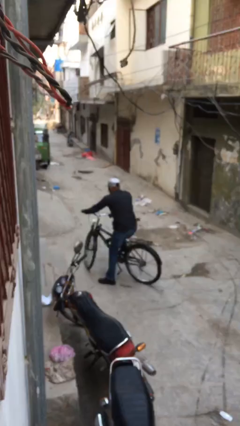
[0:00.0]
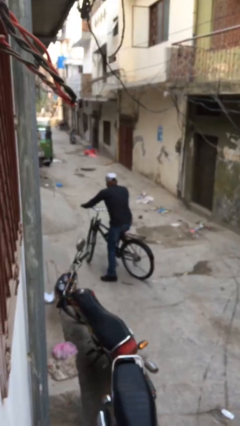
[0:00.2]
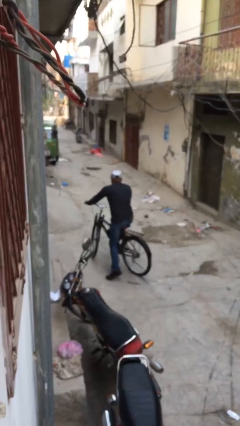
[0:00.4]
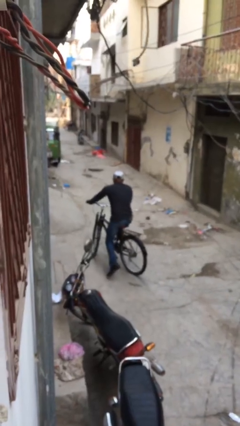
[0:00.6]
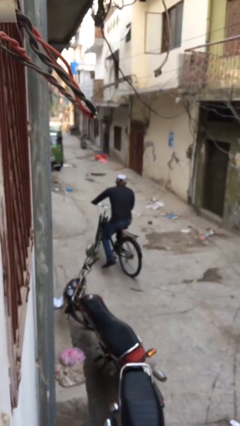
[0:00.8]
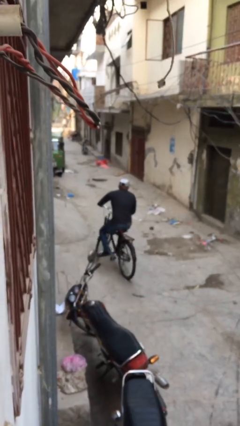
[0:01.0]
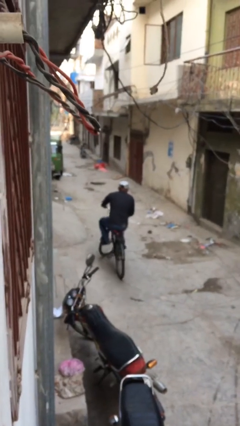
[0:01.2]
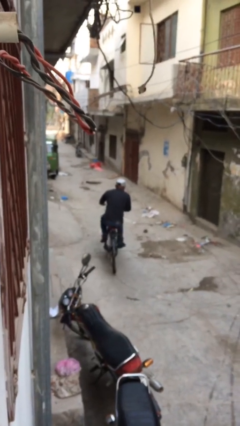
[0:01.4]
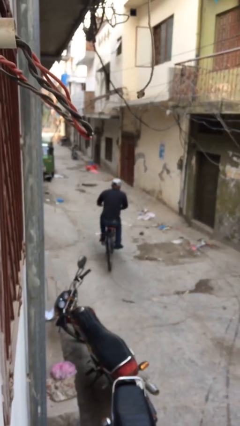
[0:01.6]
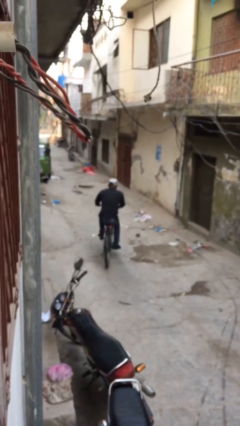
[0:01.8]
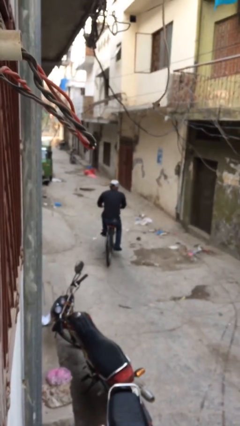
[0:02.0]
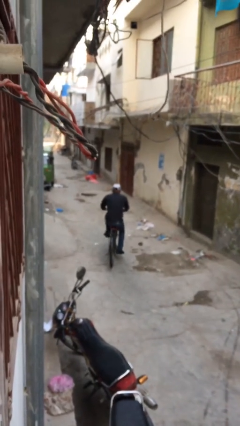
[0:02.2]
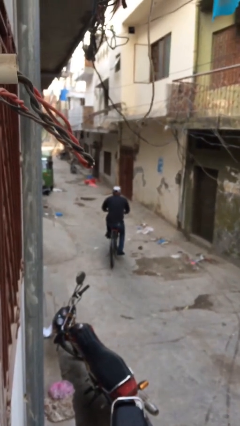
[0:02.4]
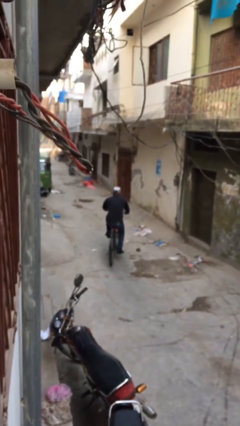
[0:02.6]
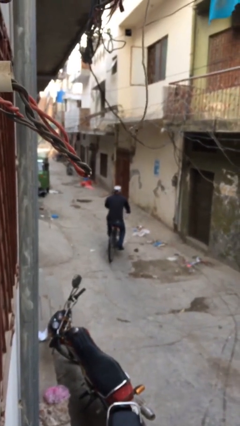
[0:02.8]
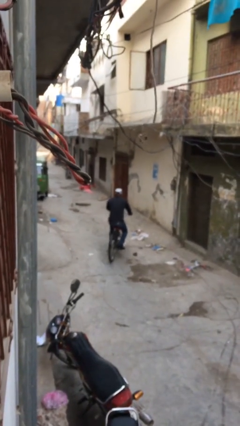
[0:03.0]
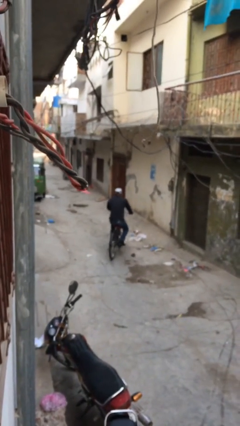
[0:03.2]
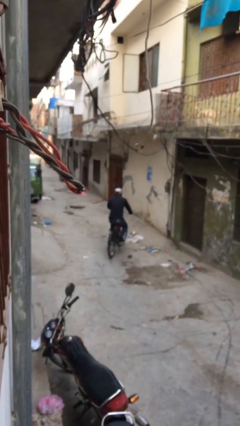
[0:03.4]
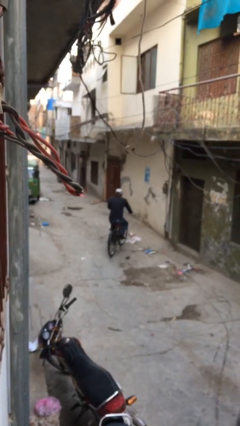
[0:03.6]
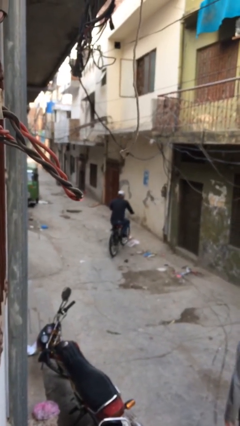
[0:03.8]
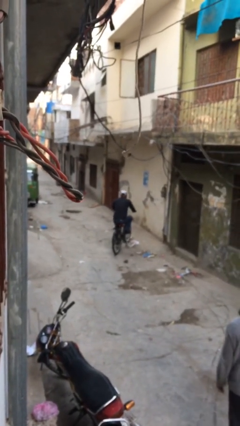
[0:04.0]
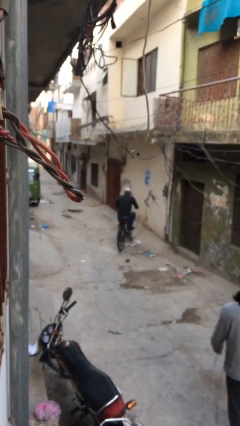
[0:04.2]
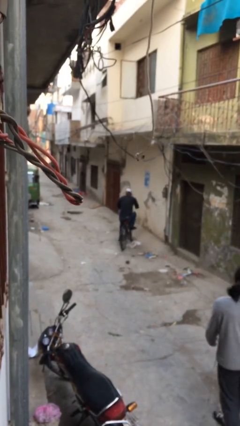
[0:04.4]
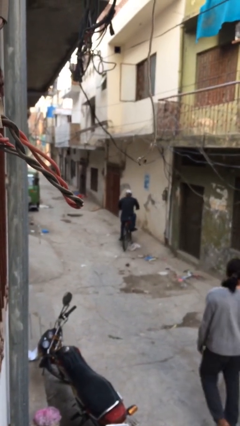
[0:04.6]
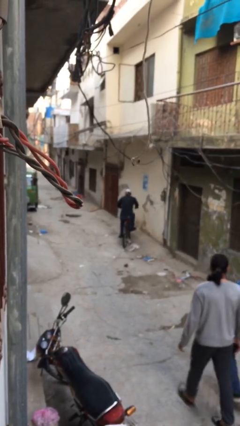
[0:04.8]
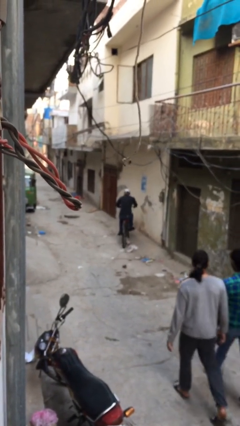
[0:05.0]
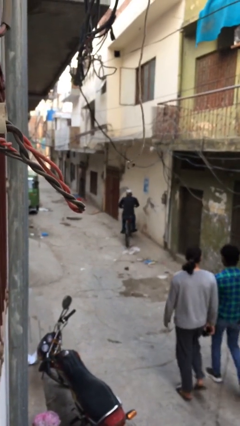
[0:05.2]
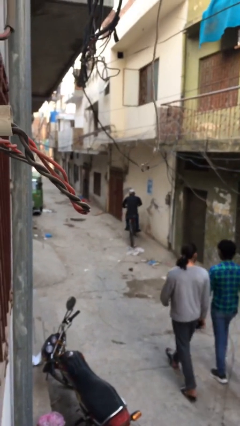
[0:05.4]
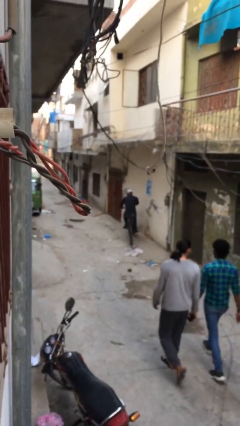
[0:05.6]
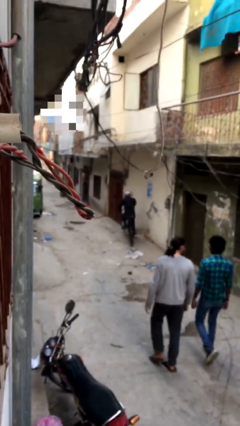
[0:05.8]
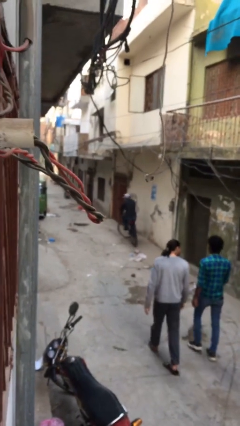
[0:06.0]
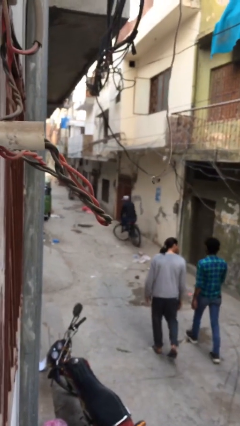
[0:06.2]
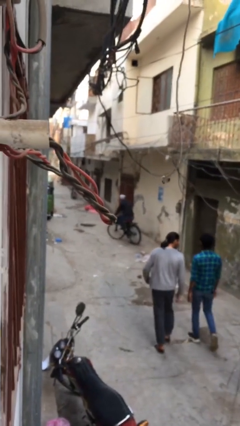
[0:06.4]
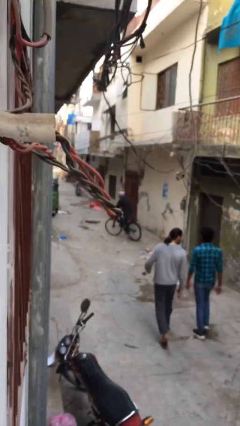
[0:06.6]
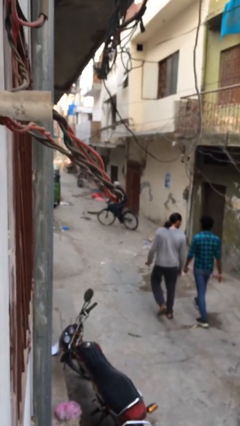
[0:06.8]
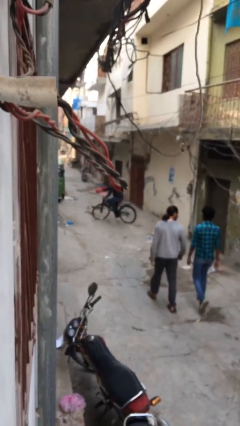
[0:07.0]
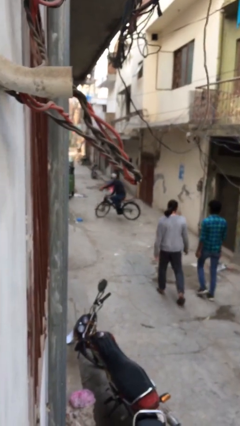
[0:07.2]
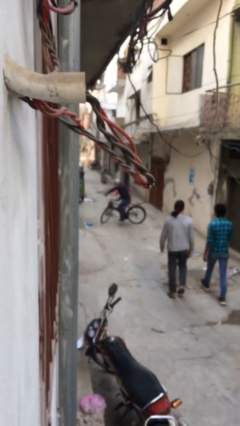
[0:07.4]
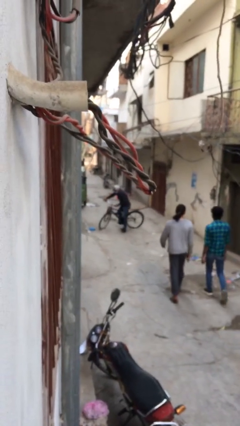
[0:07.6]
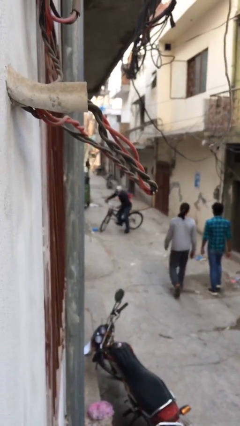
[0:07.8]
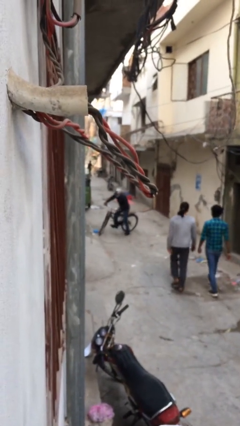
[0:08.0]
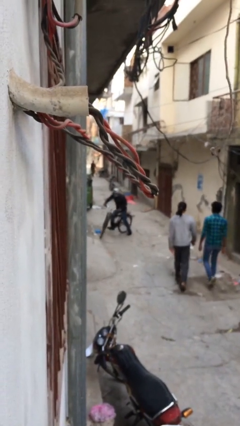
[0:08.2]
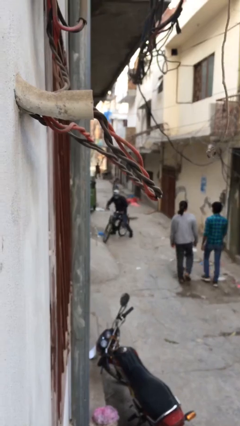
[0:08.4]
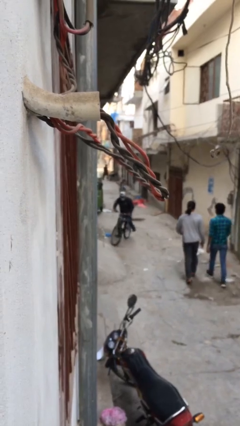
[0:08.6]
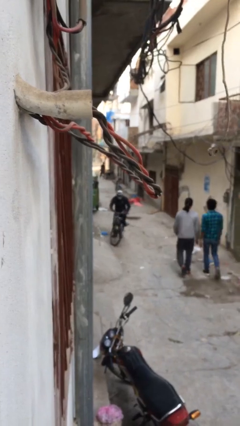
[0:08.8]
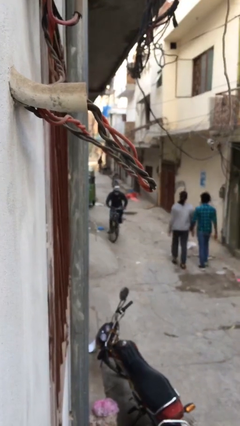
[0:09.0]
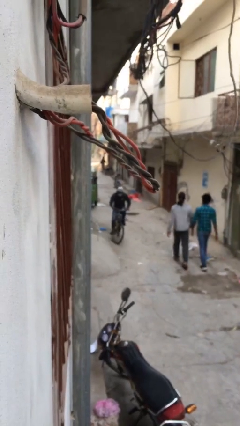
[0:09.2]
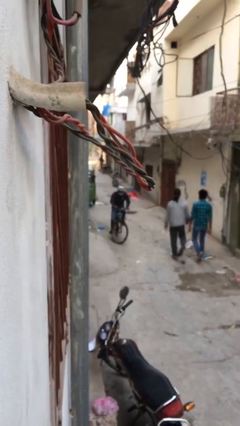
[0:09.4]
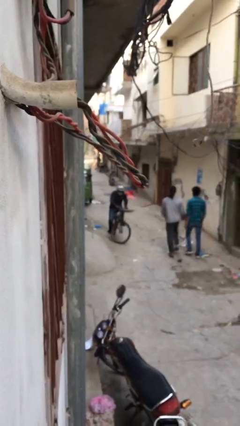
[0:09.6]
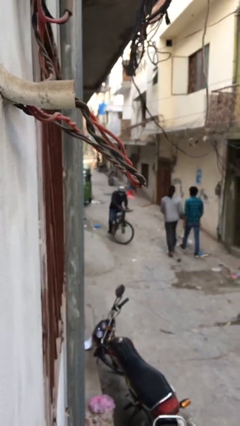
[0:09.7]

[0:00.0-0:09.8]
person rides bicycle

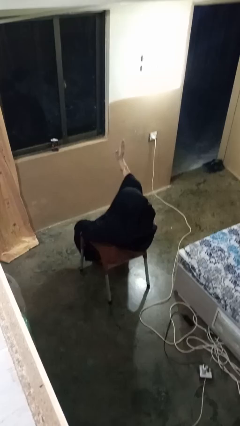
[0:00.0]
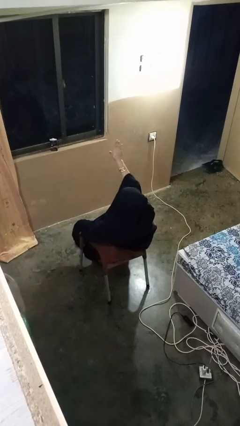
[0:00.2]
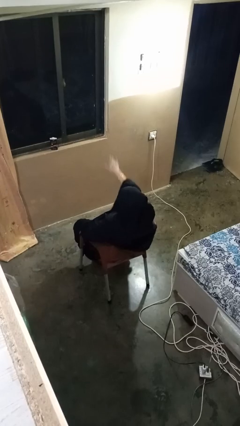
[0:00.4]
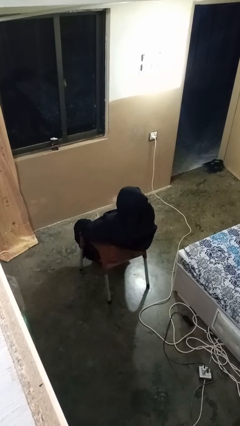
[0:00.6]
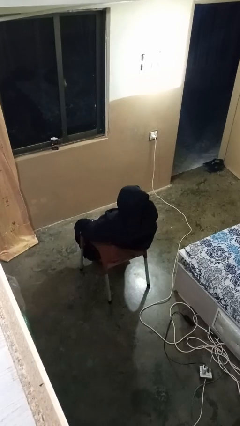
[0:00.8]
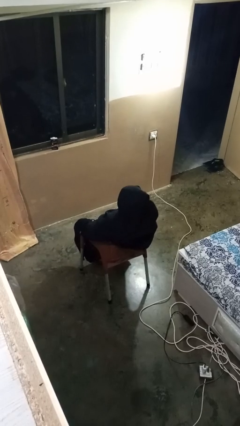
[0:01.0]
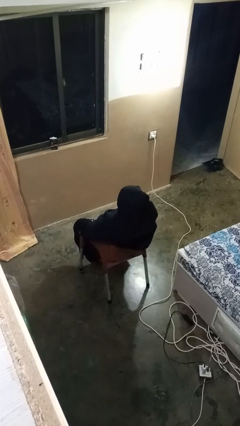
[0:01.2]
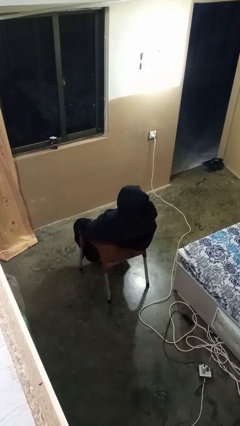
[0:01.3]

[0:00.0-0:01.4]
person gestures swipe down

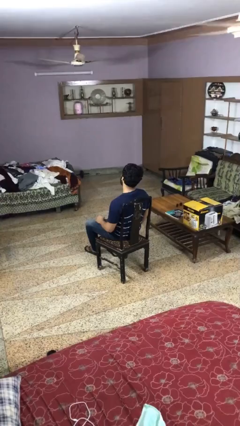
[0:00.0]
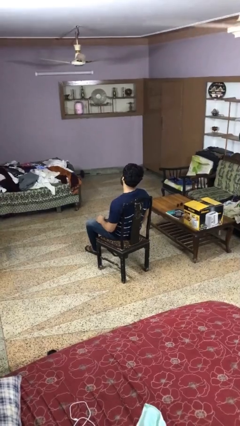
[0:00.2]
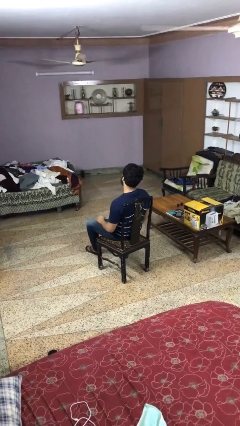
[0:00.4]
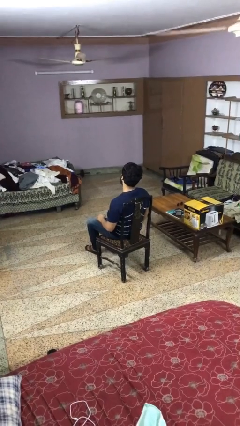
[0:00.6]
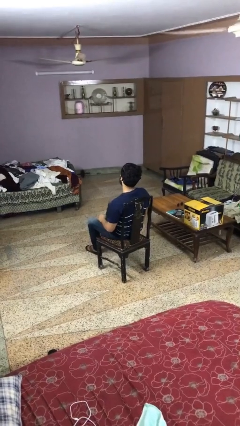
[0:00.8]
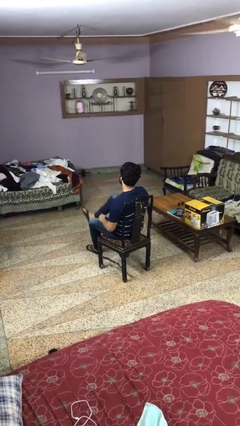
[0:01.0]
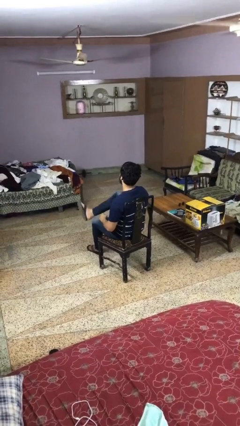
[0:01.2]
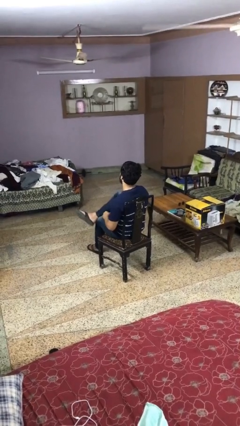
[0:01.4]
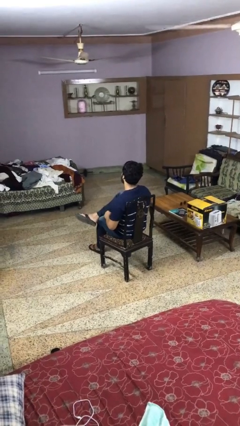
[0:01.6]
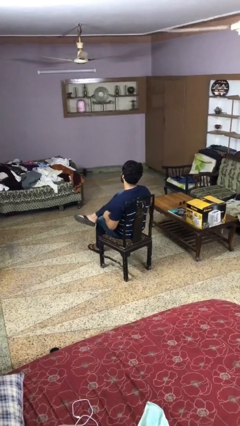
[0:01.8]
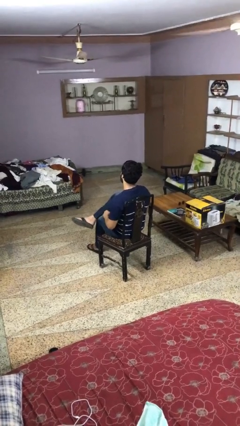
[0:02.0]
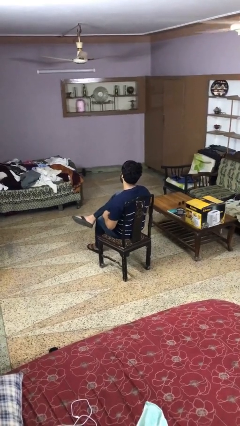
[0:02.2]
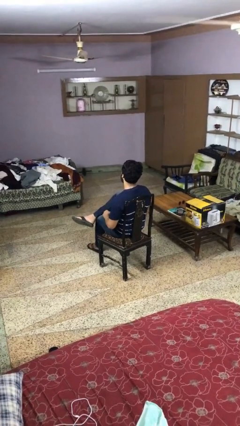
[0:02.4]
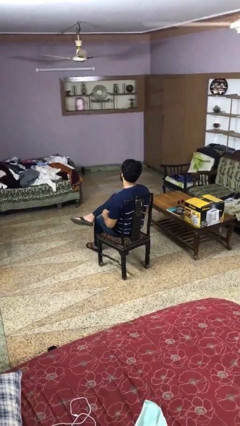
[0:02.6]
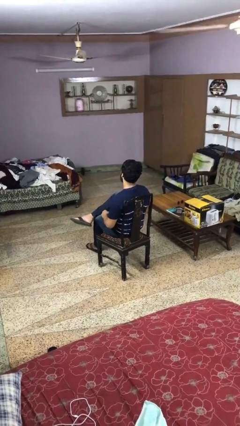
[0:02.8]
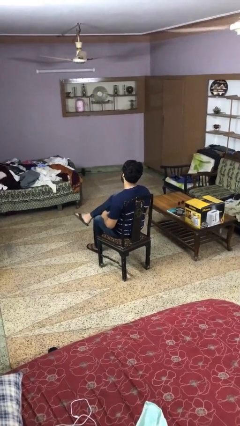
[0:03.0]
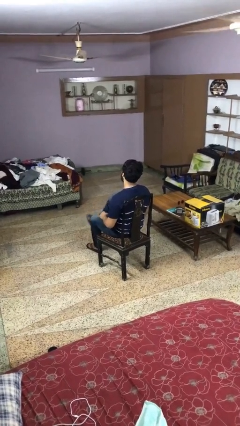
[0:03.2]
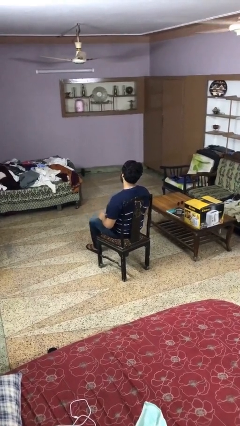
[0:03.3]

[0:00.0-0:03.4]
person crosses legs

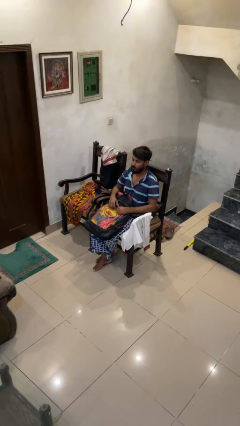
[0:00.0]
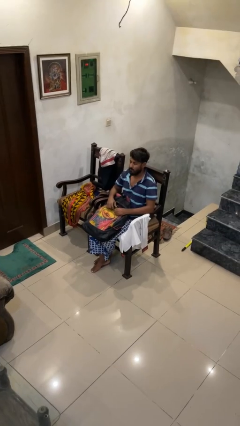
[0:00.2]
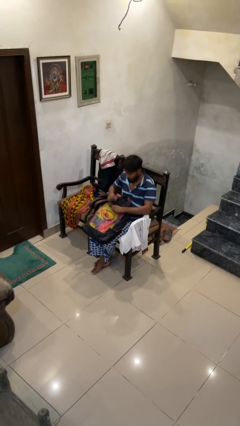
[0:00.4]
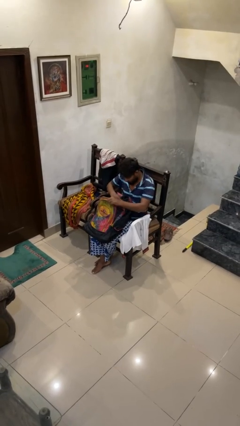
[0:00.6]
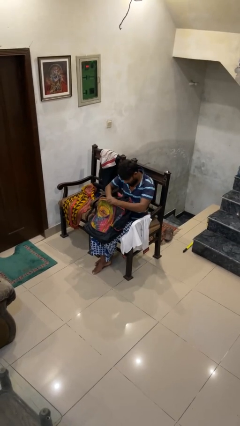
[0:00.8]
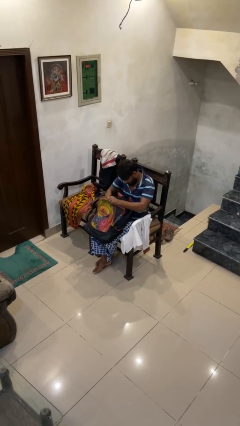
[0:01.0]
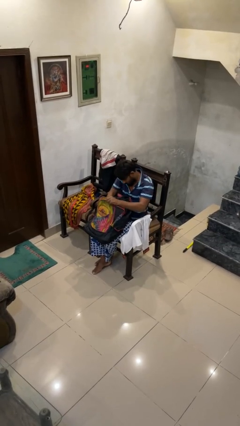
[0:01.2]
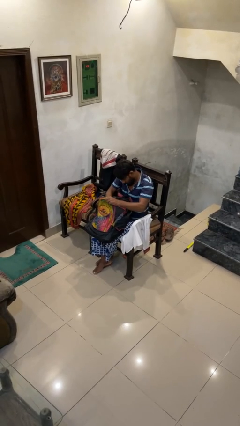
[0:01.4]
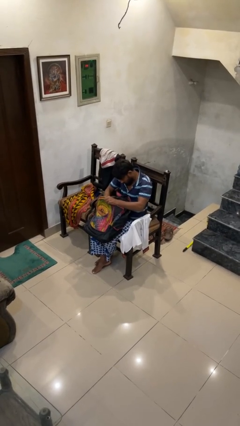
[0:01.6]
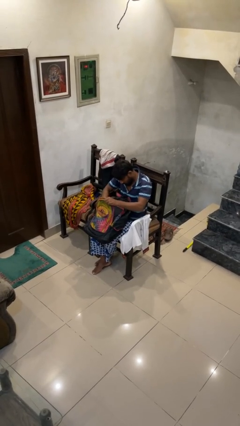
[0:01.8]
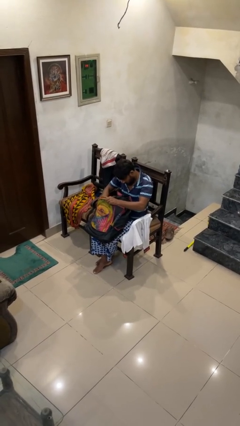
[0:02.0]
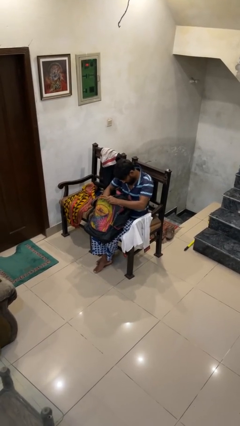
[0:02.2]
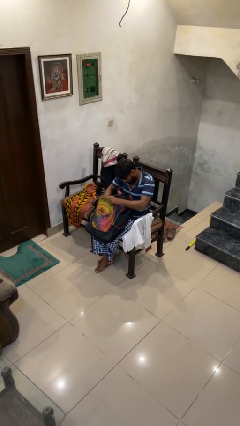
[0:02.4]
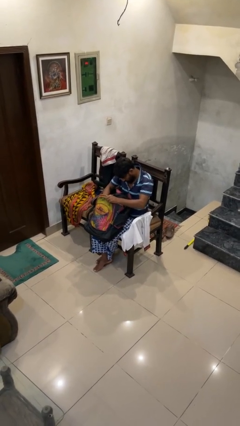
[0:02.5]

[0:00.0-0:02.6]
person searches in backpack

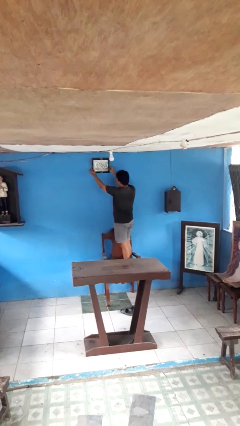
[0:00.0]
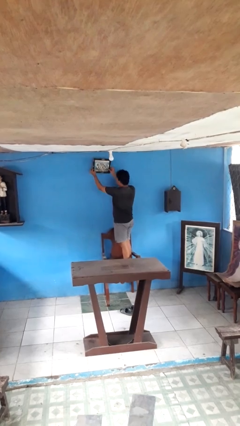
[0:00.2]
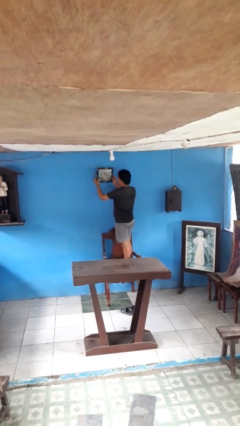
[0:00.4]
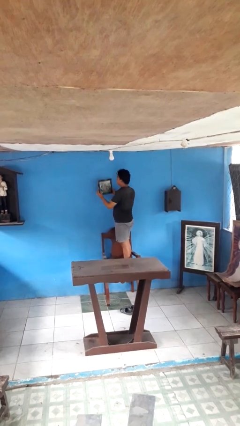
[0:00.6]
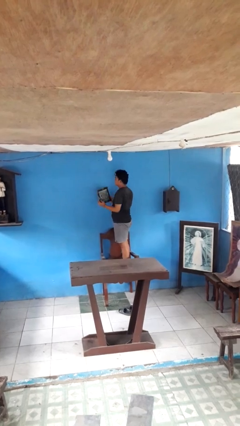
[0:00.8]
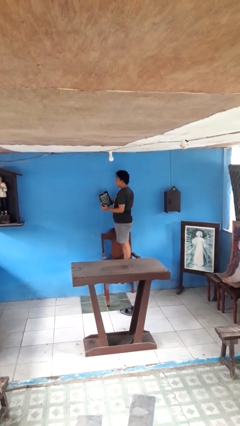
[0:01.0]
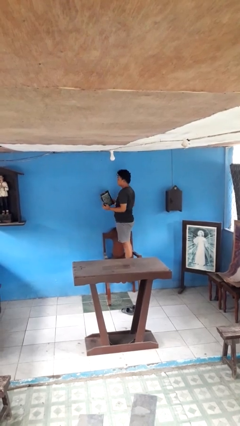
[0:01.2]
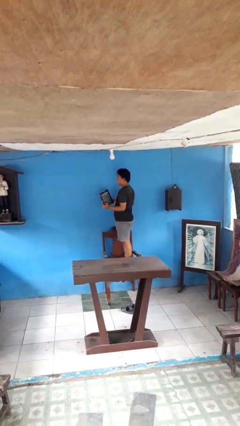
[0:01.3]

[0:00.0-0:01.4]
person takes down picture frame
